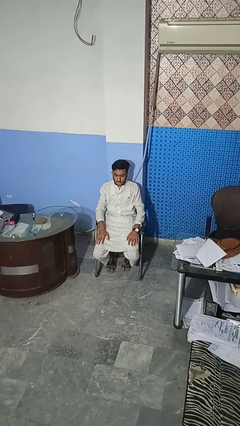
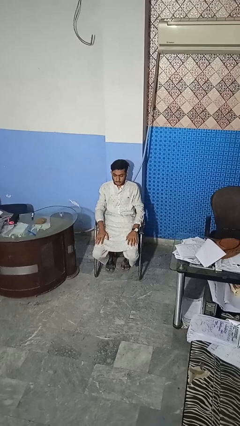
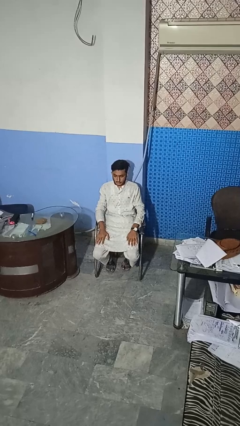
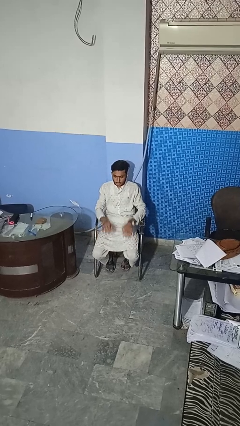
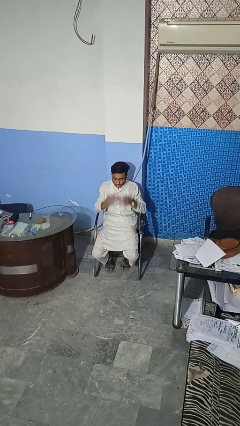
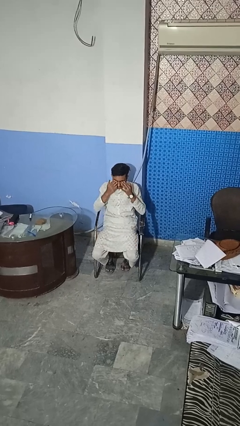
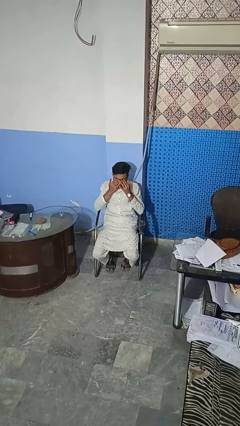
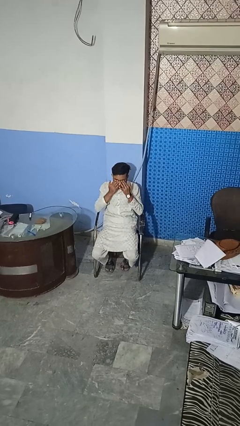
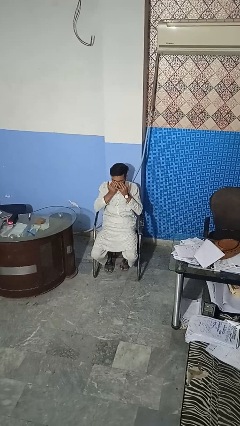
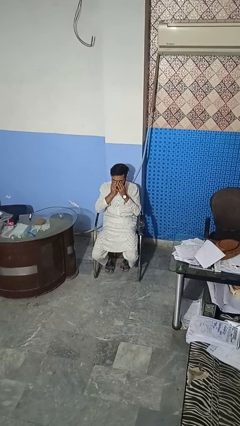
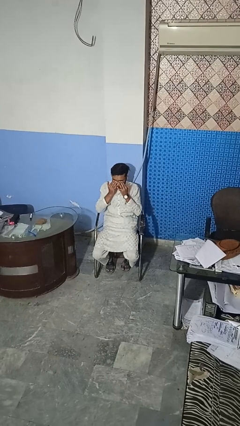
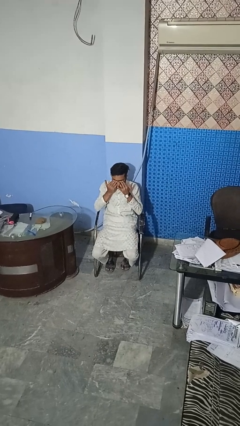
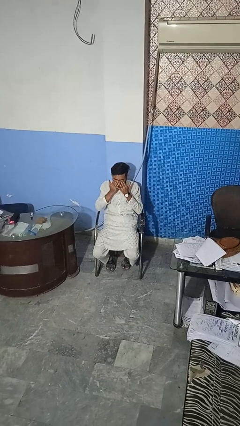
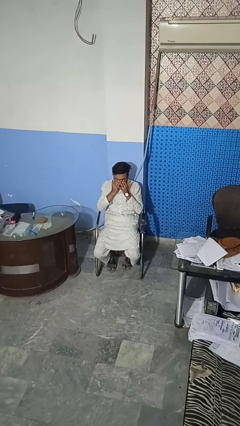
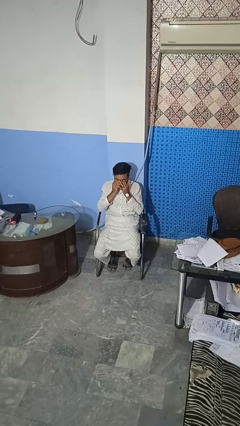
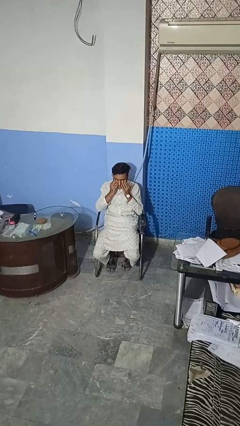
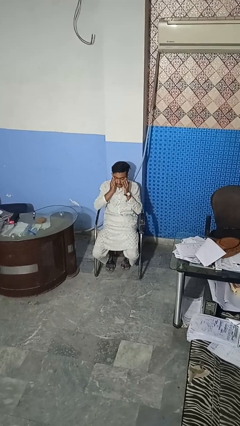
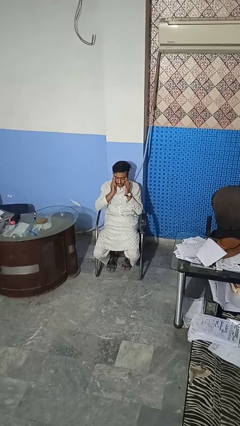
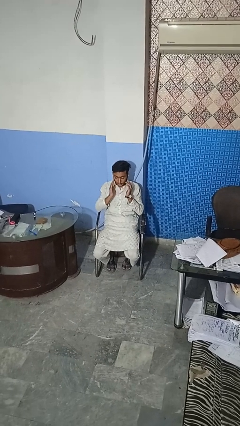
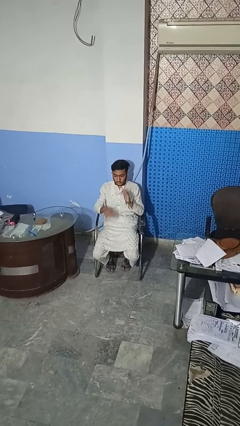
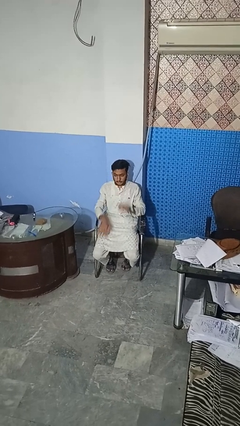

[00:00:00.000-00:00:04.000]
person rubs eyes

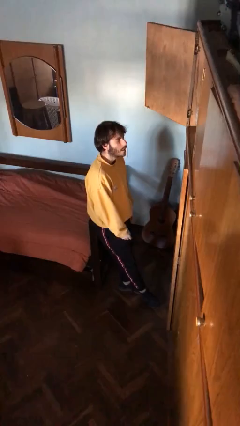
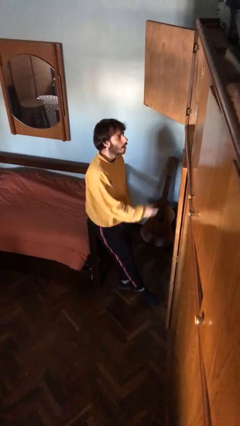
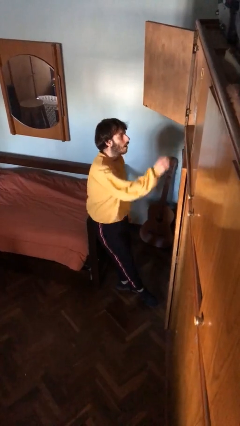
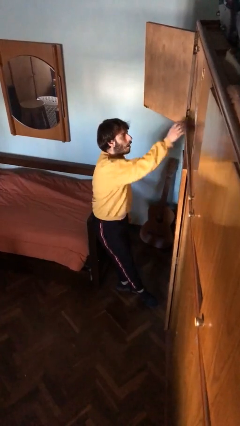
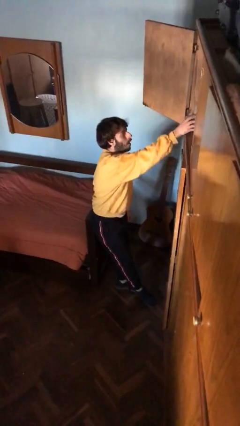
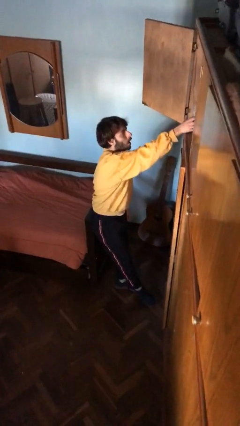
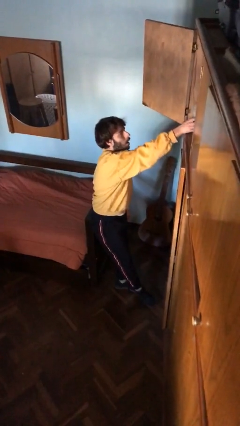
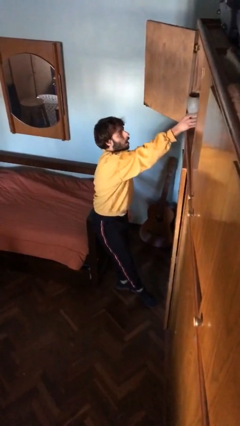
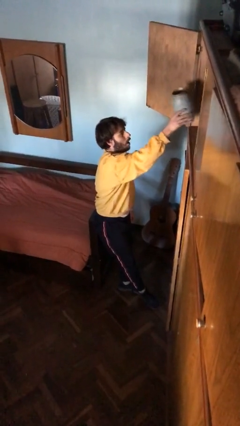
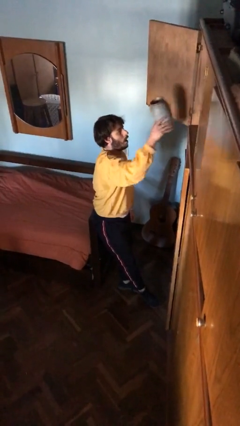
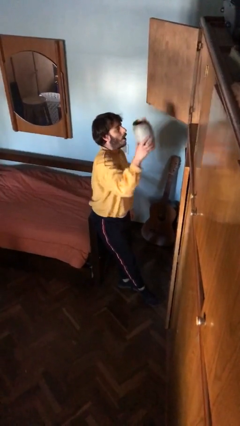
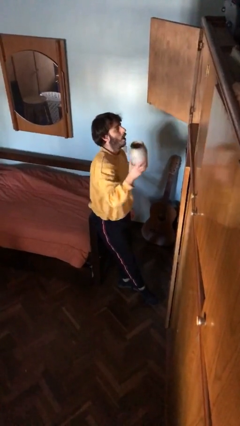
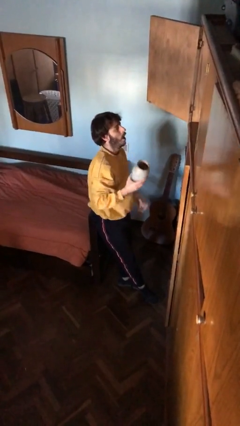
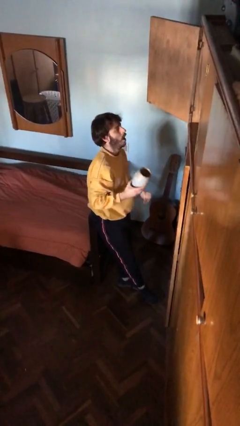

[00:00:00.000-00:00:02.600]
person picks up object from cabinet

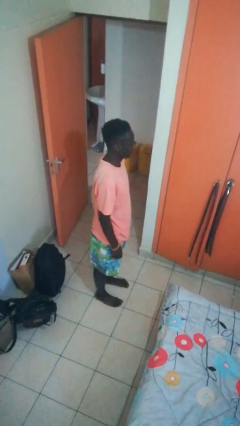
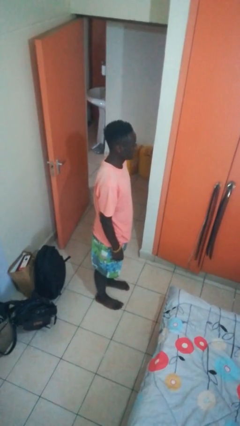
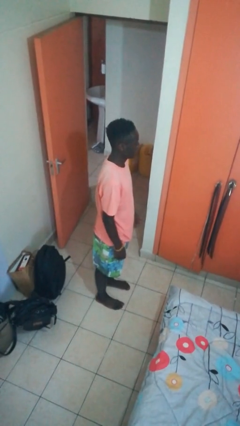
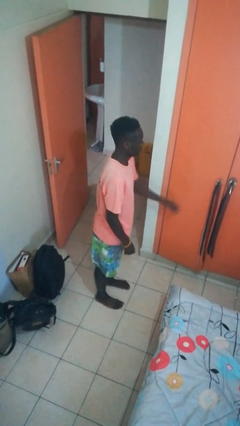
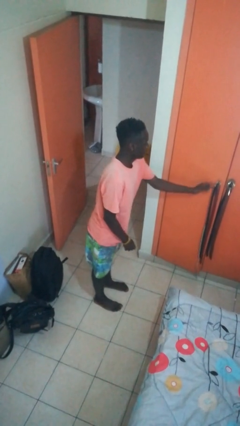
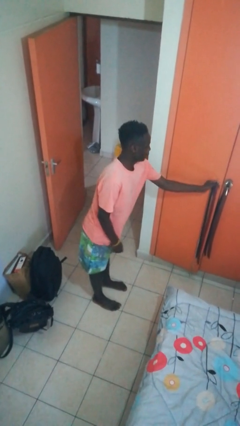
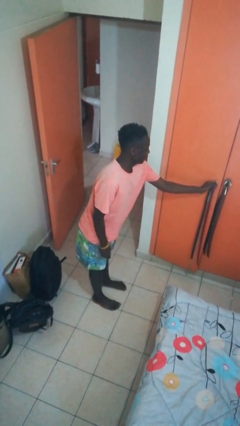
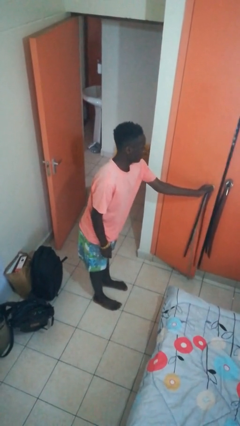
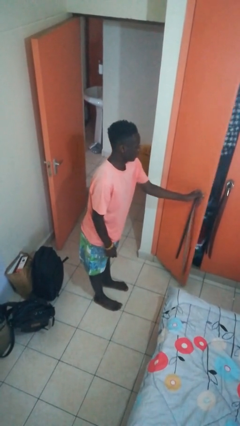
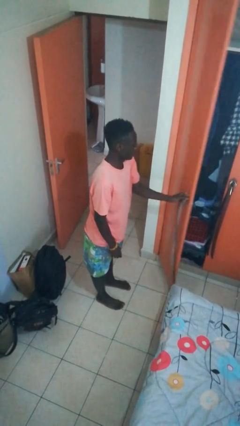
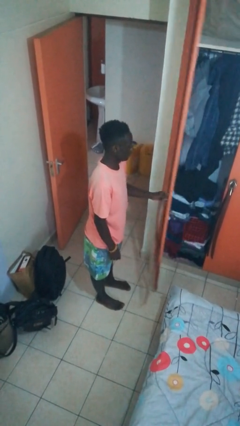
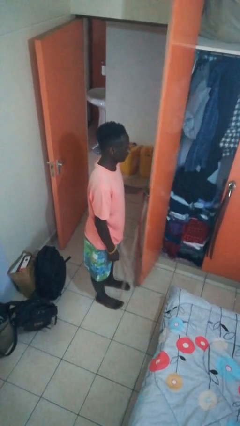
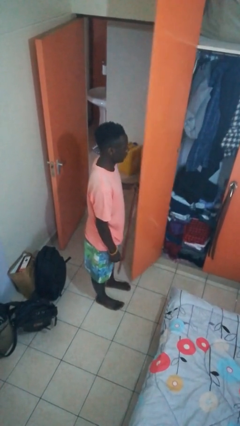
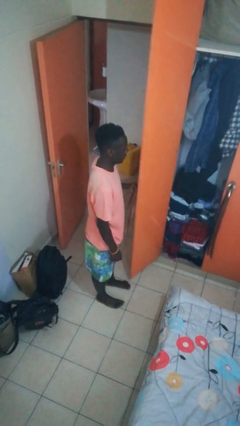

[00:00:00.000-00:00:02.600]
person opens closet door

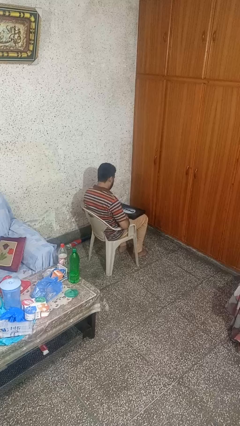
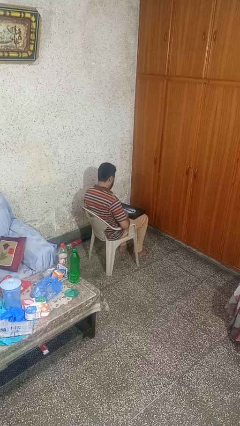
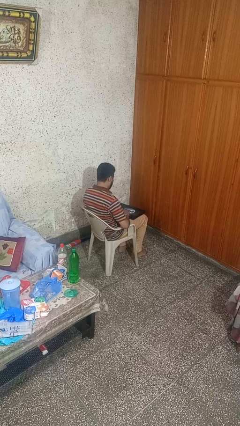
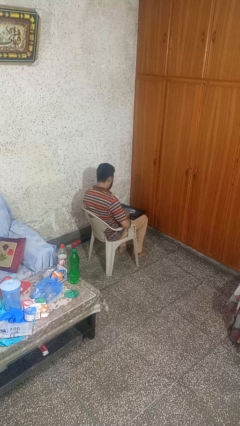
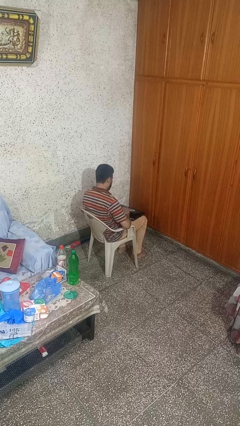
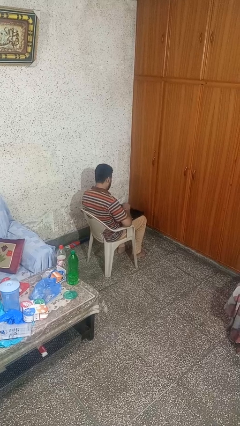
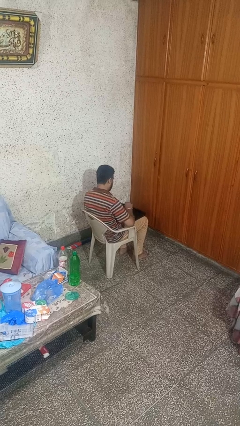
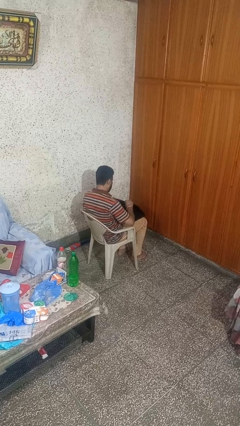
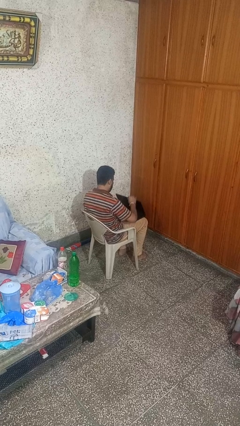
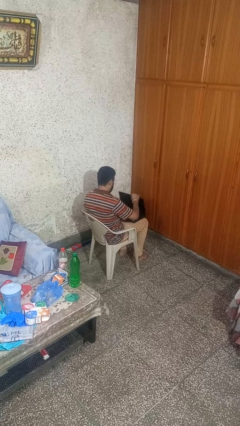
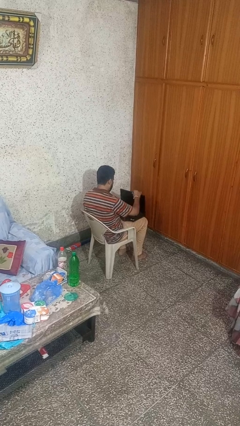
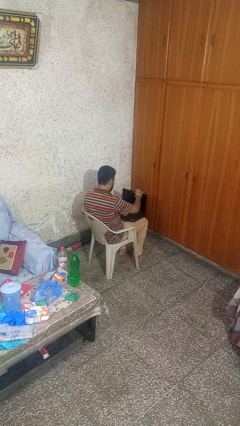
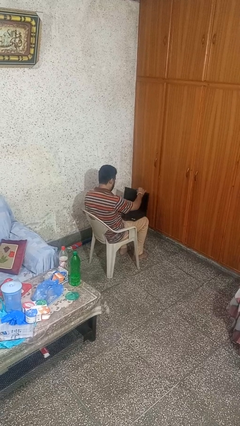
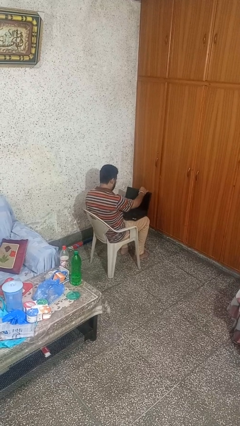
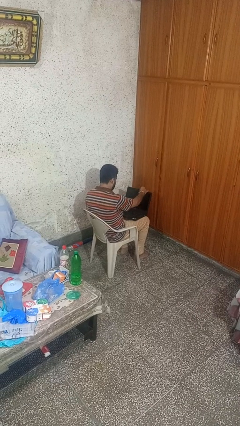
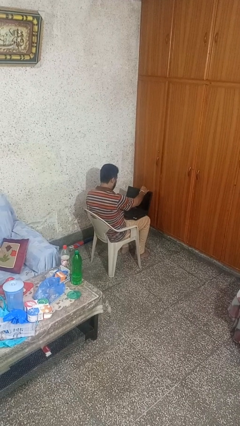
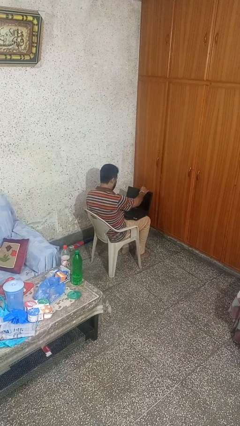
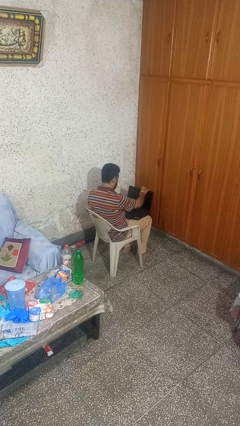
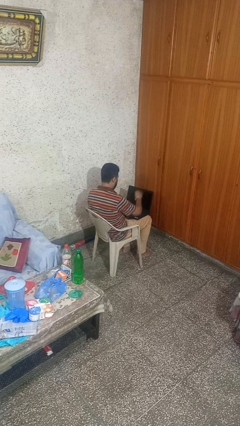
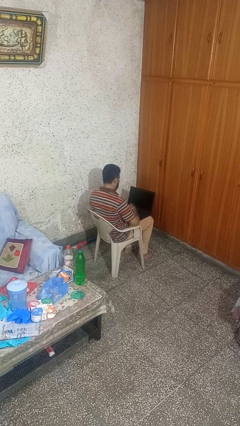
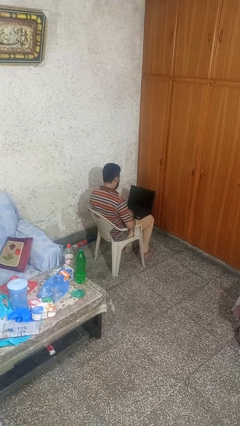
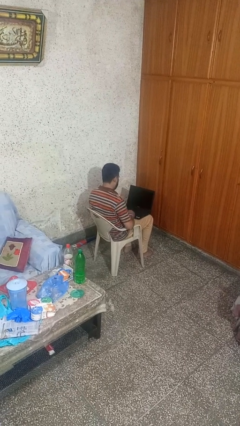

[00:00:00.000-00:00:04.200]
person opens laptop

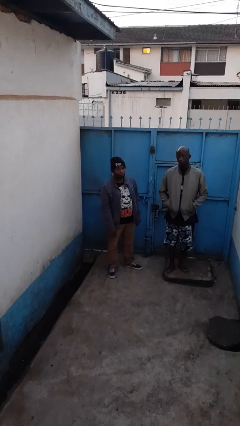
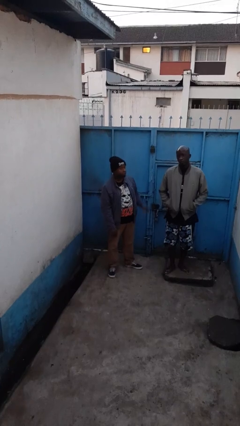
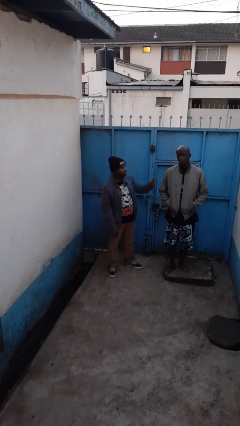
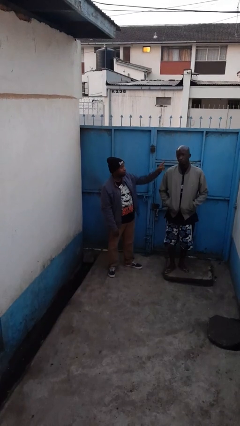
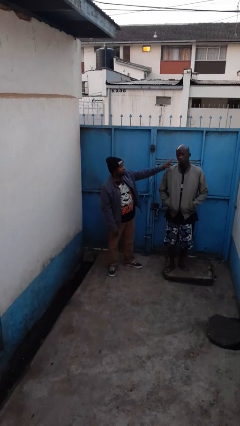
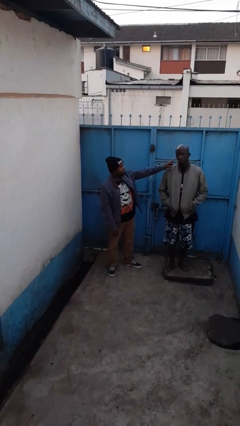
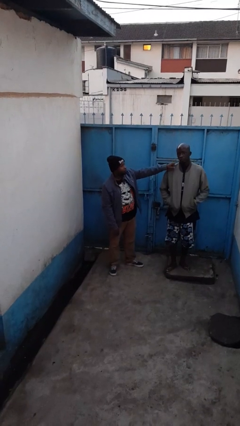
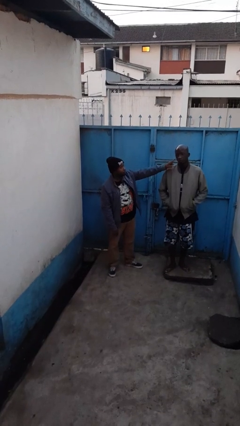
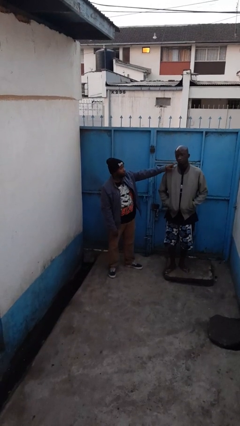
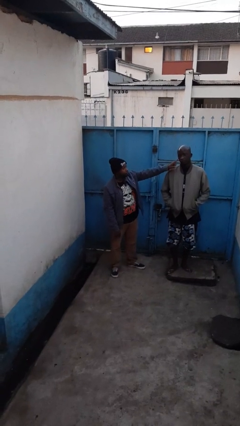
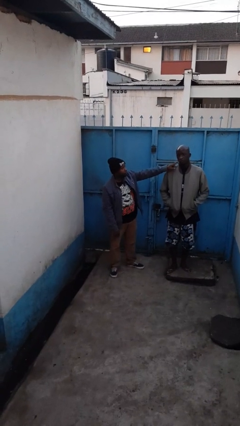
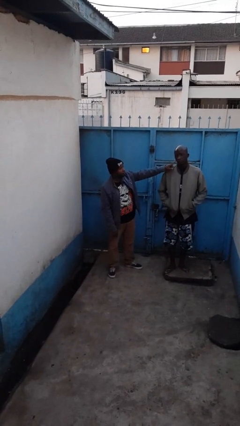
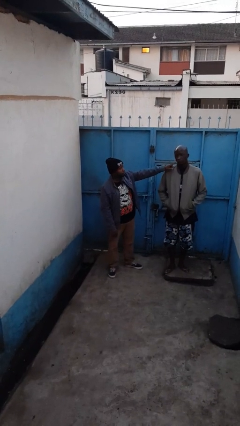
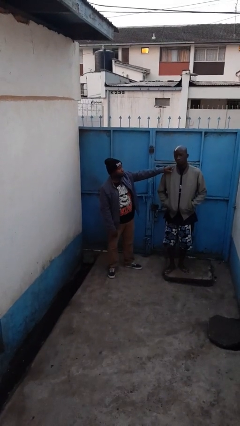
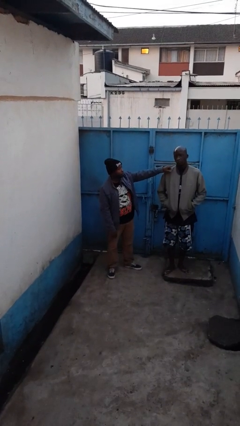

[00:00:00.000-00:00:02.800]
person touches face of person

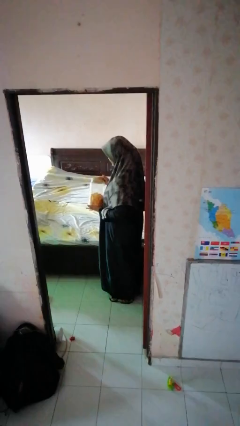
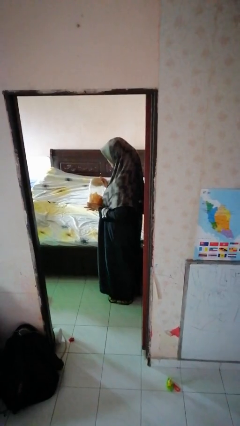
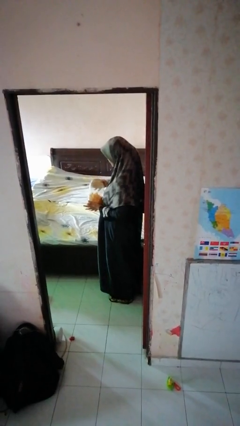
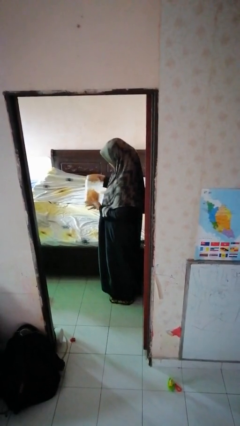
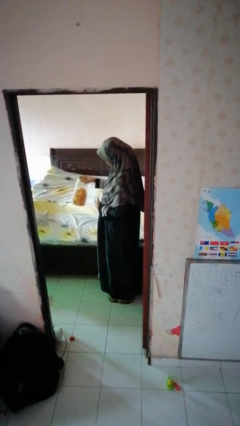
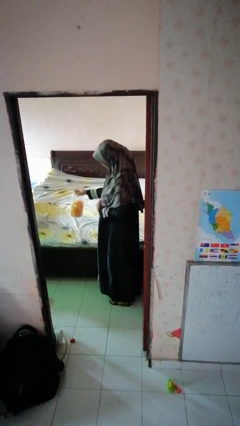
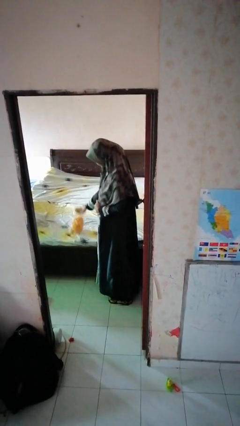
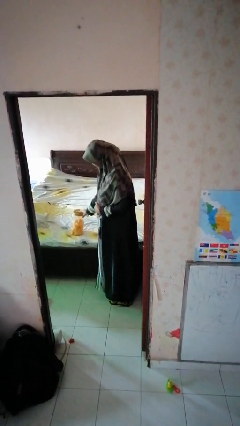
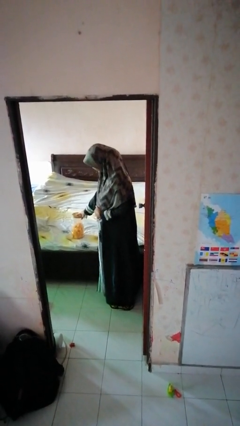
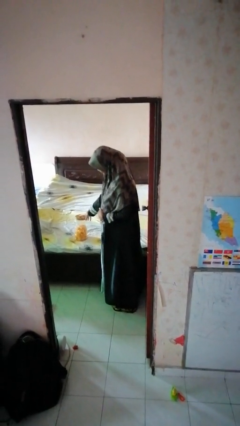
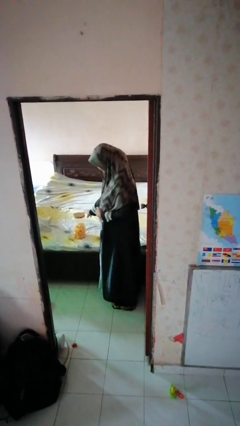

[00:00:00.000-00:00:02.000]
person puts down object on bed
